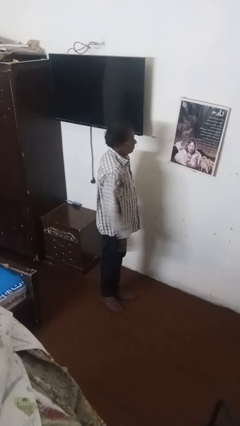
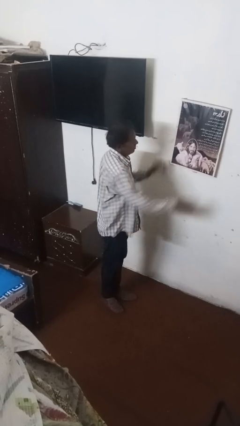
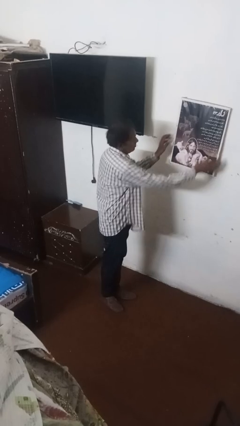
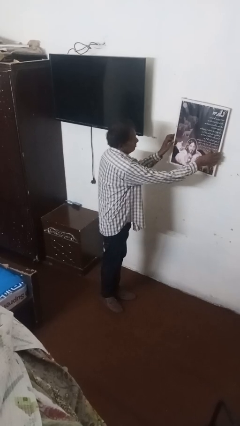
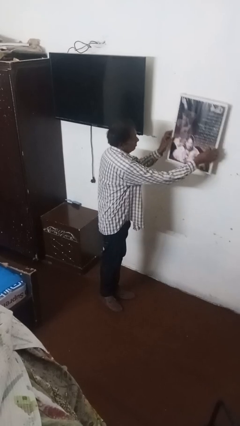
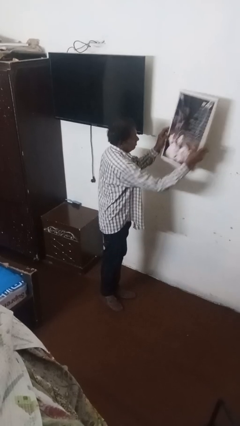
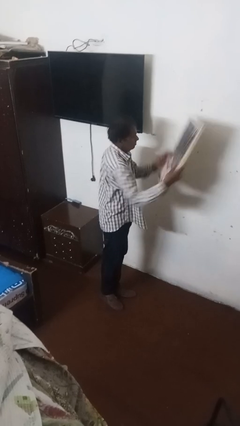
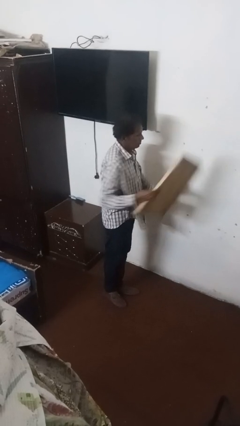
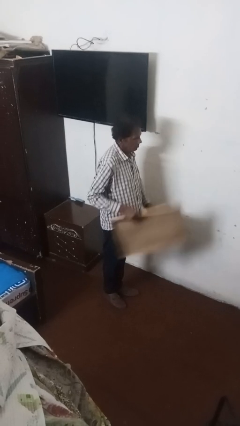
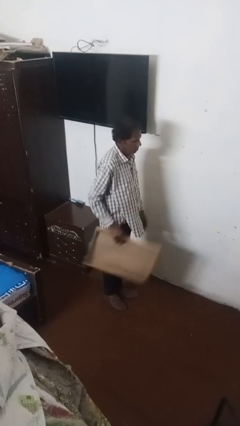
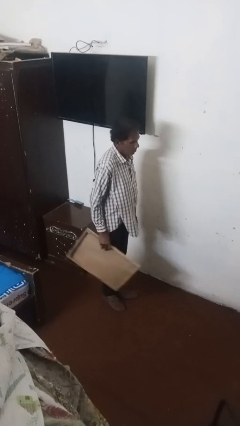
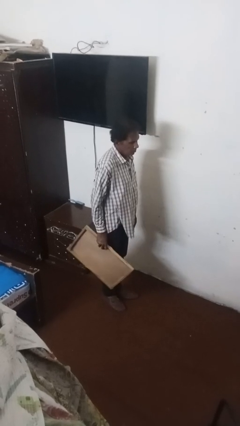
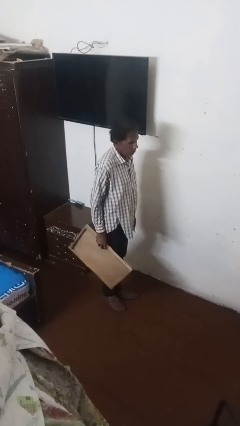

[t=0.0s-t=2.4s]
person takes down picture frame

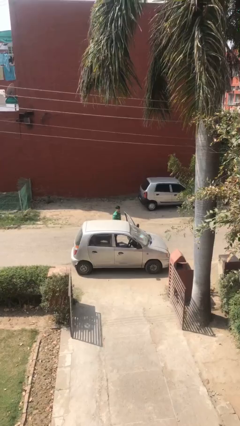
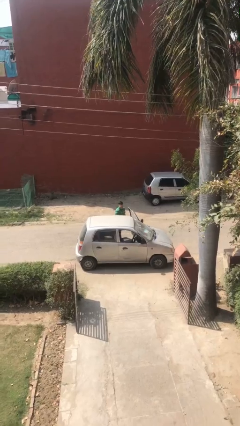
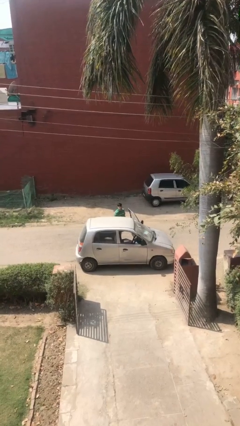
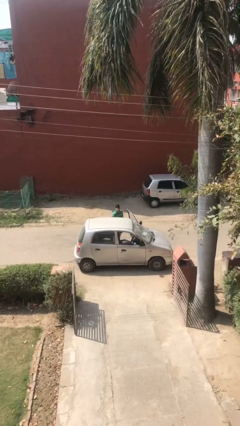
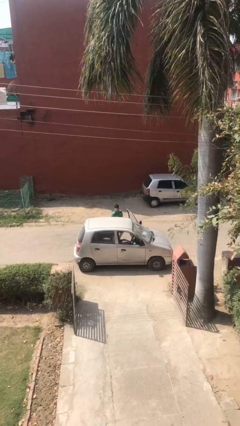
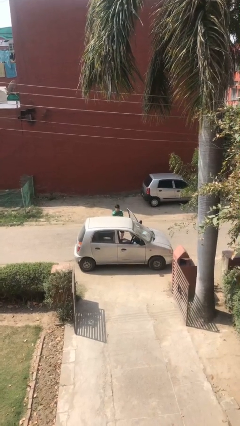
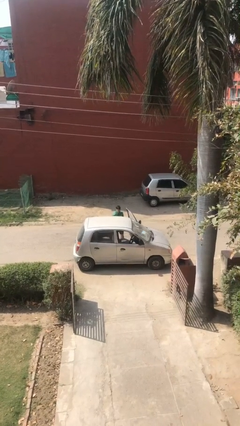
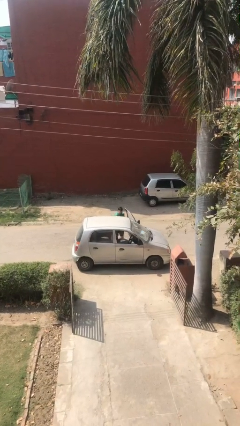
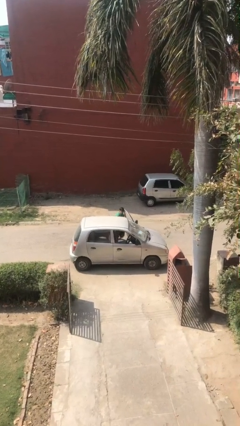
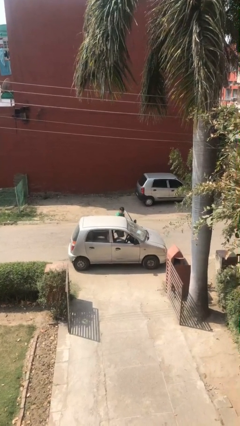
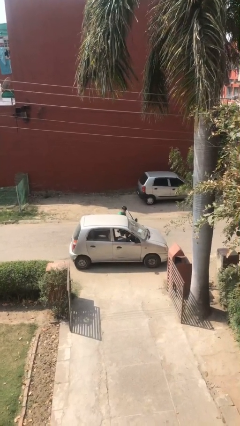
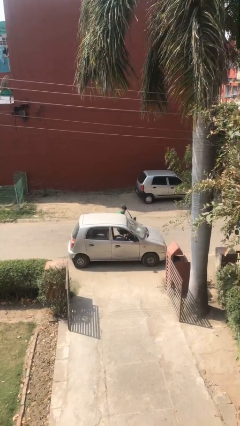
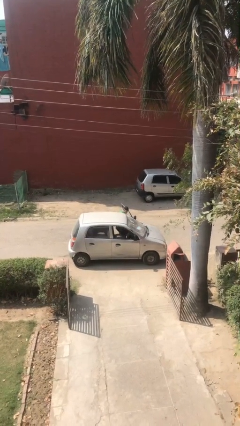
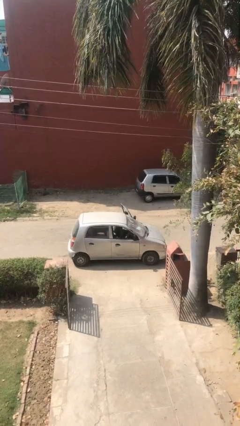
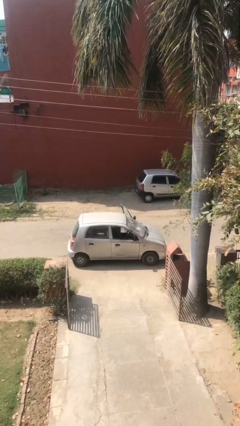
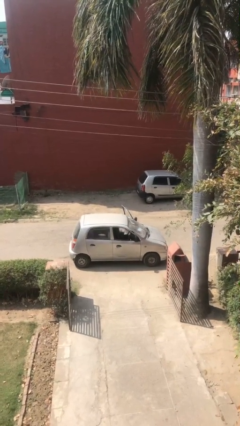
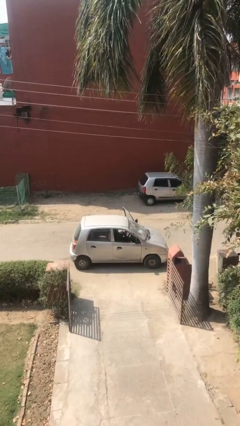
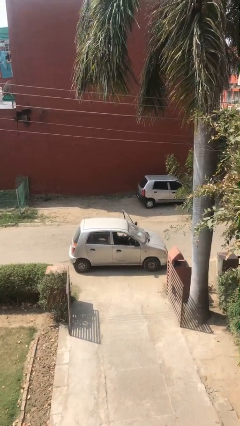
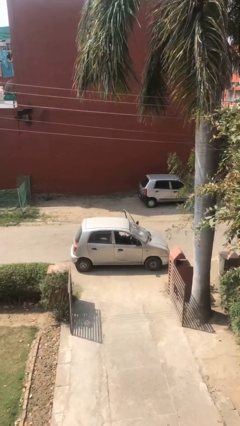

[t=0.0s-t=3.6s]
person enters car

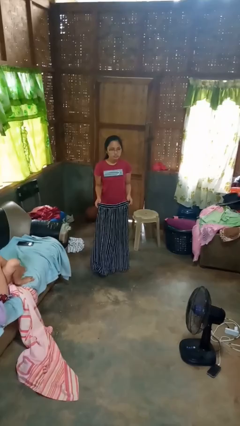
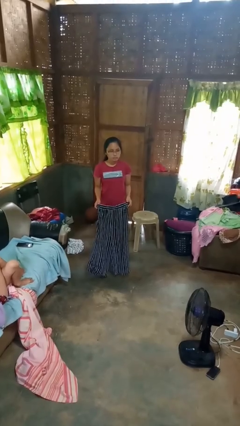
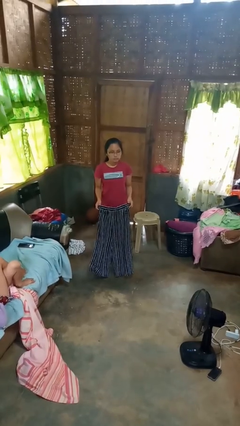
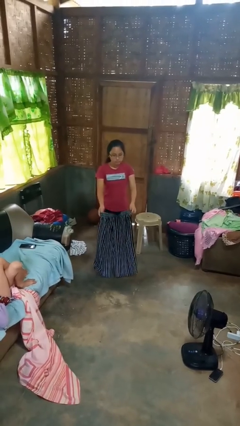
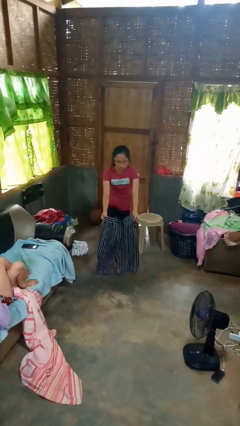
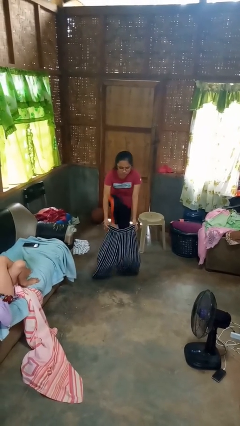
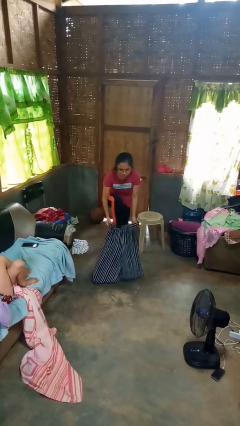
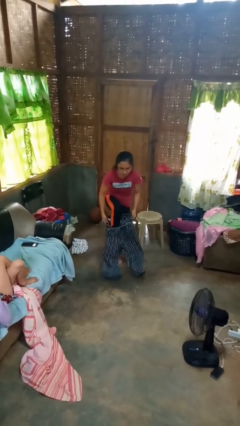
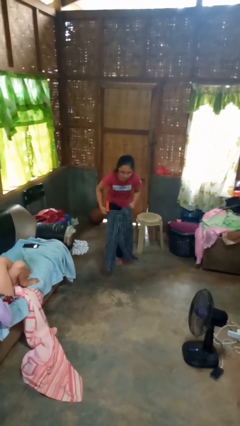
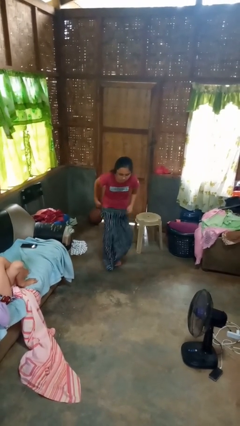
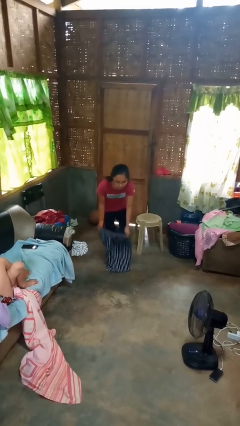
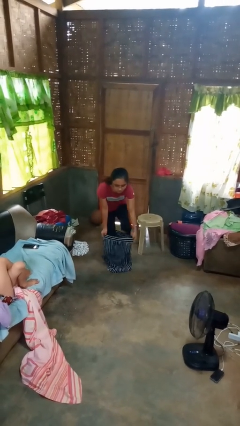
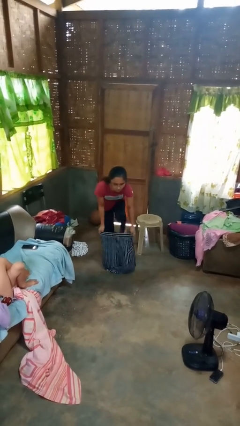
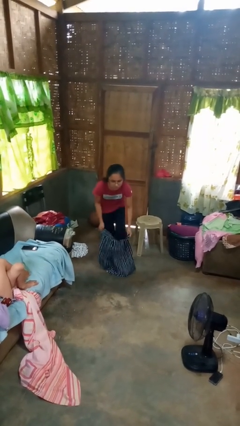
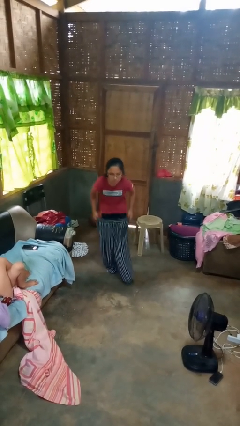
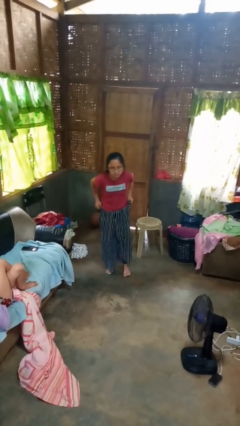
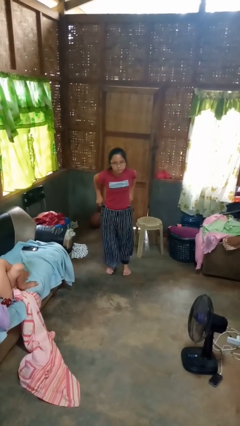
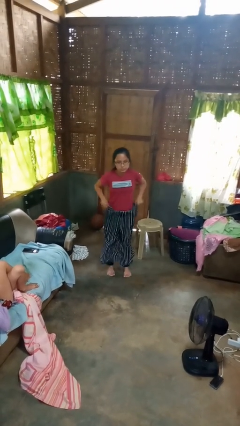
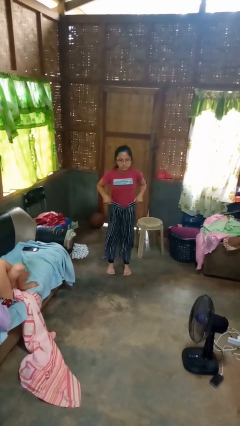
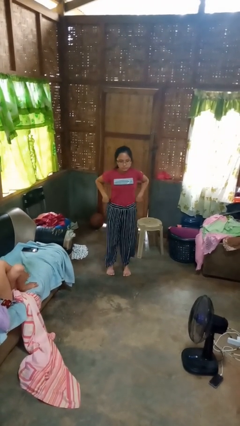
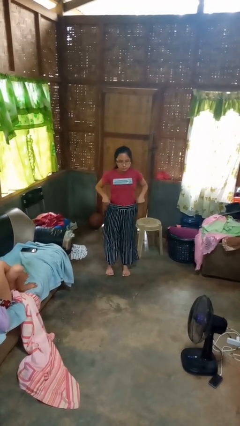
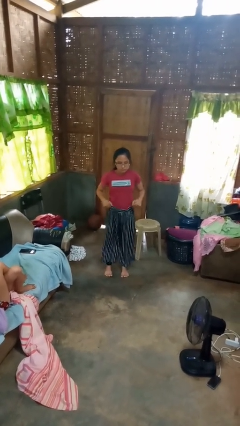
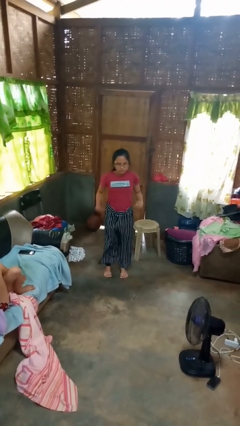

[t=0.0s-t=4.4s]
person puts on pants

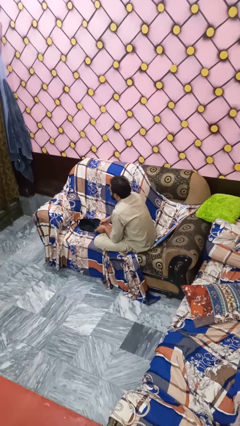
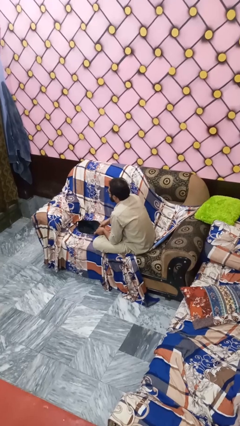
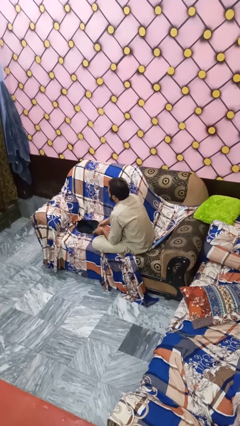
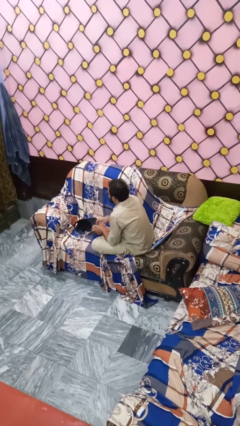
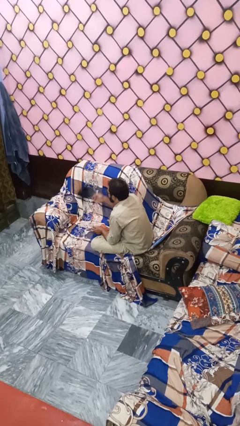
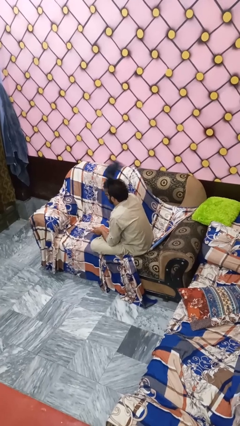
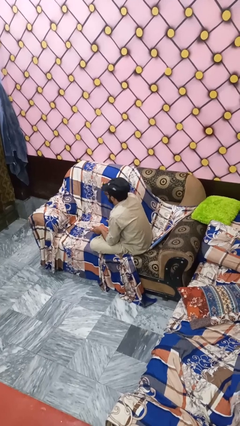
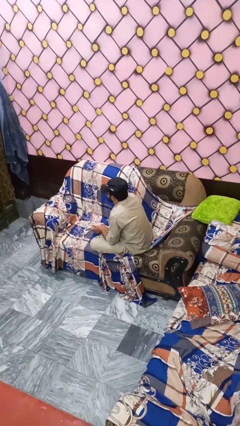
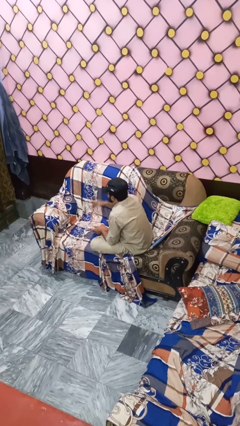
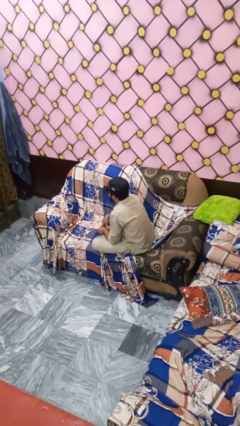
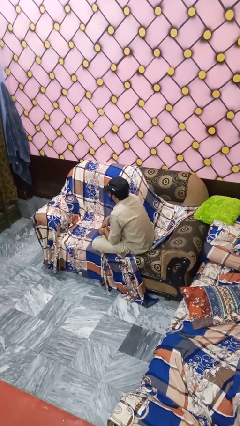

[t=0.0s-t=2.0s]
person holds object above head

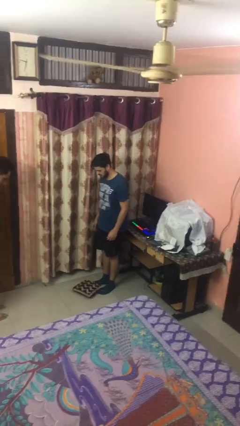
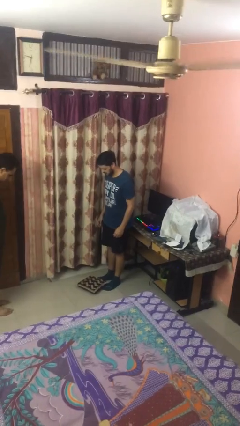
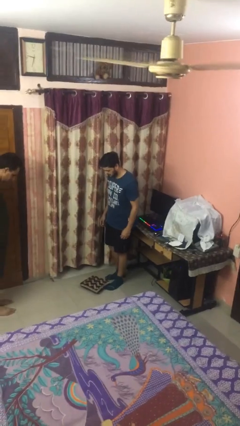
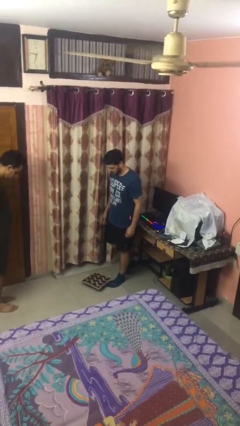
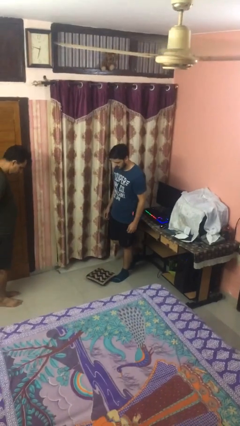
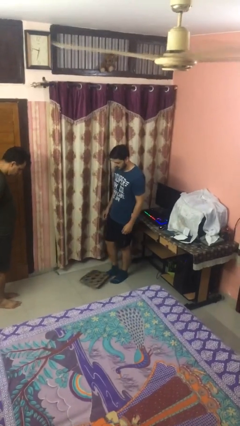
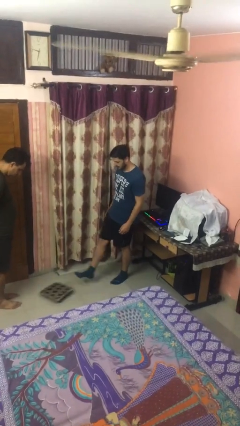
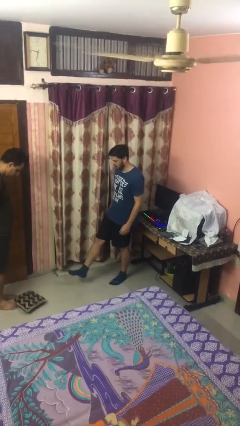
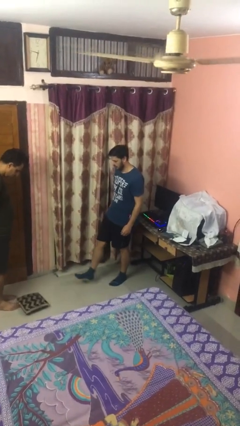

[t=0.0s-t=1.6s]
person kicks object to person

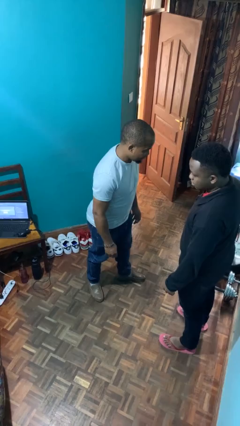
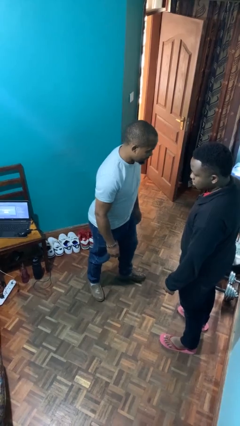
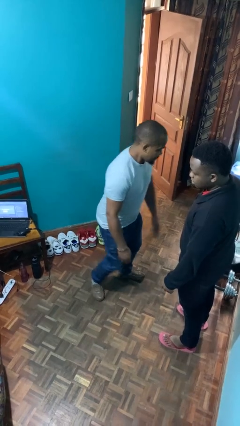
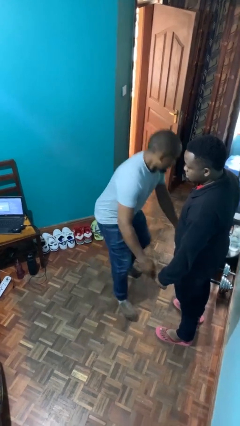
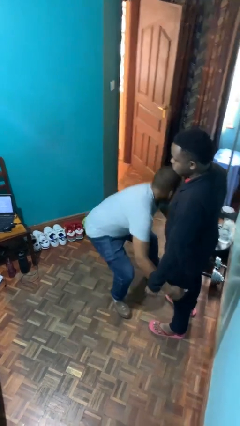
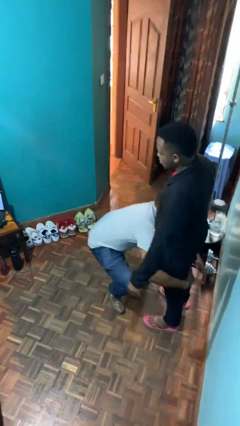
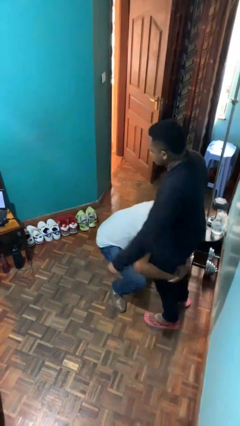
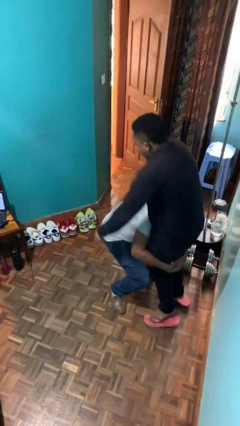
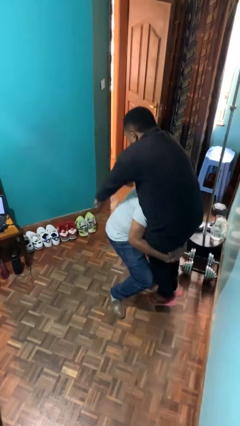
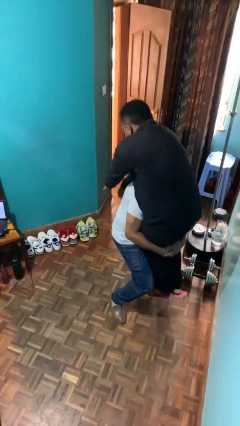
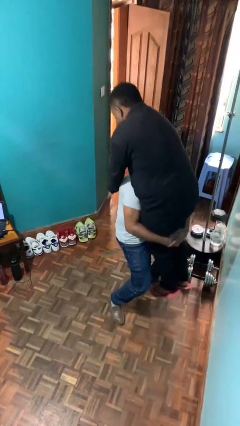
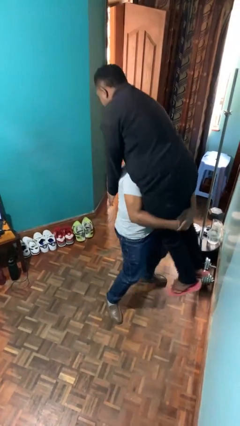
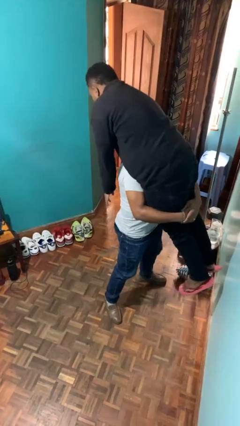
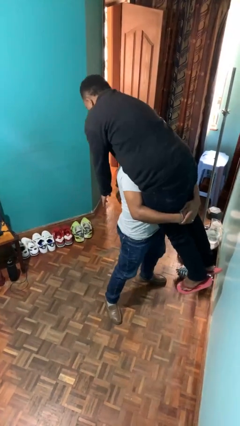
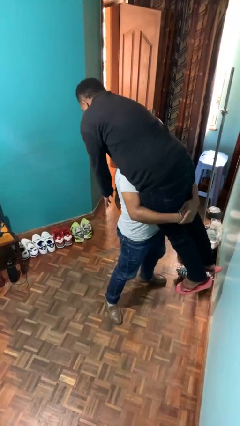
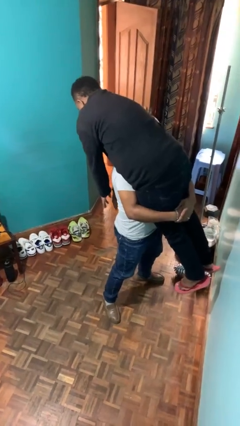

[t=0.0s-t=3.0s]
person carries person over shoulder
